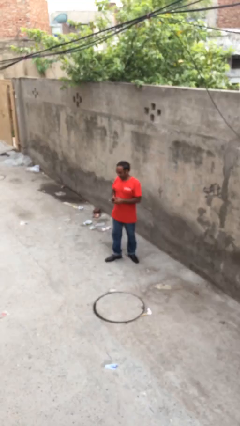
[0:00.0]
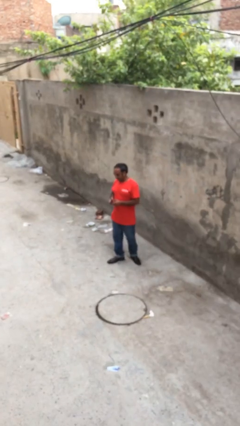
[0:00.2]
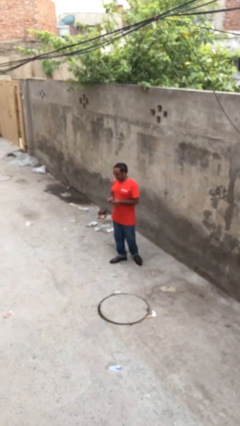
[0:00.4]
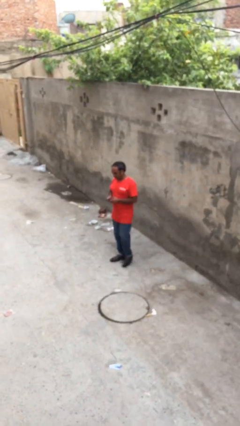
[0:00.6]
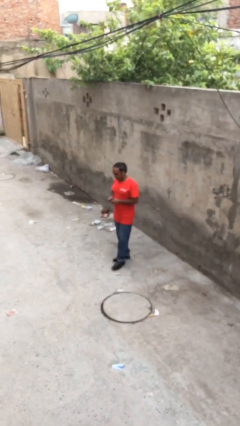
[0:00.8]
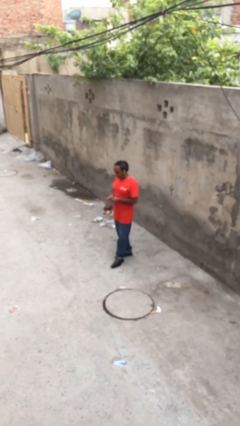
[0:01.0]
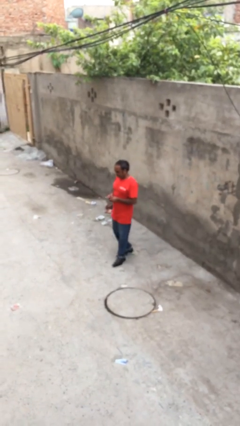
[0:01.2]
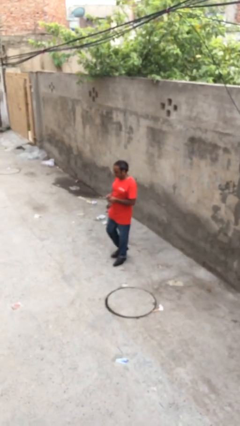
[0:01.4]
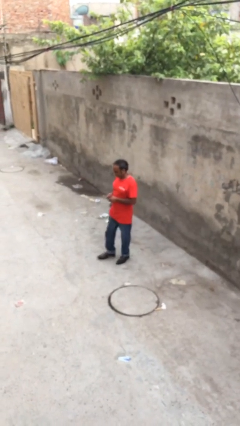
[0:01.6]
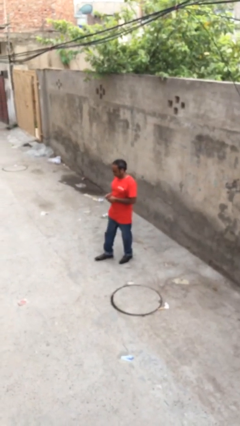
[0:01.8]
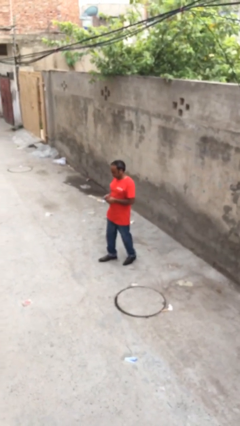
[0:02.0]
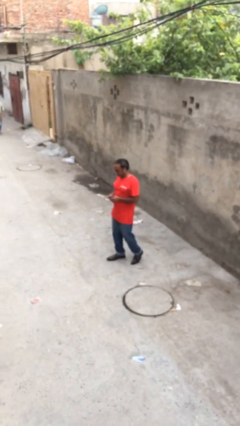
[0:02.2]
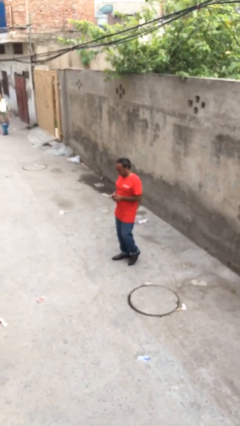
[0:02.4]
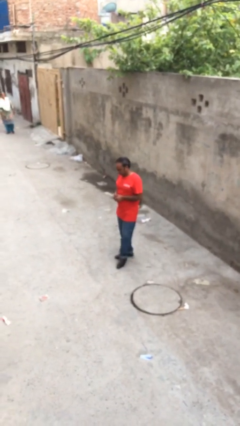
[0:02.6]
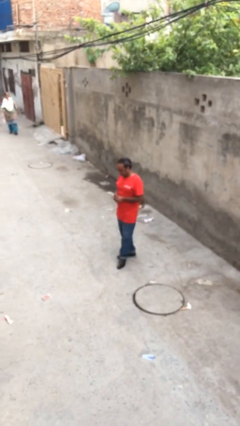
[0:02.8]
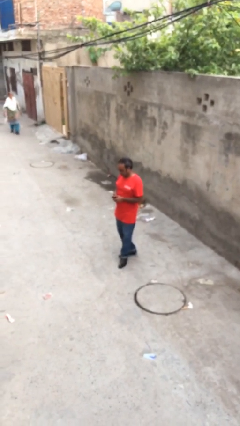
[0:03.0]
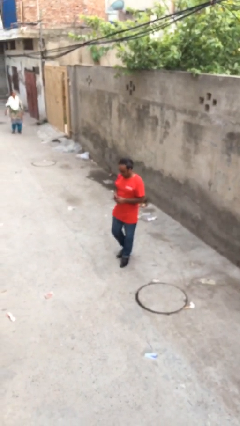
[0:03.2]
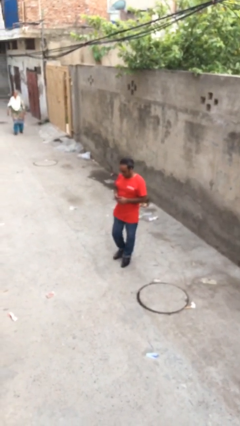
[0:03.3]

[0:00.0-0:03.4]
person texts on phone

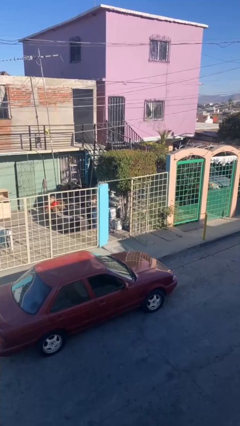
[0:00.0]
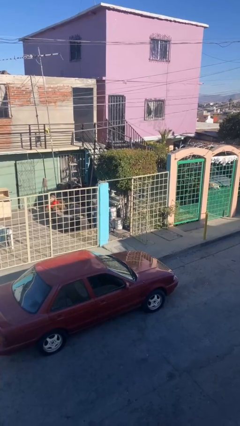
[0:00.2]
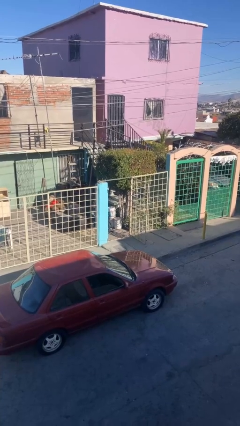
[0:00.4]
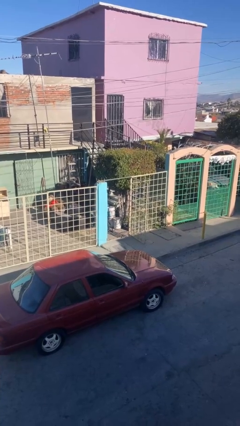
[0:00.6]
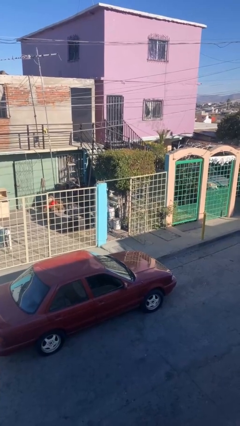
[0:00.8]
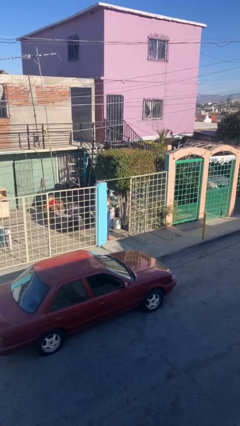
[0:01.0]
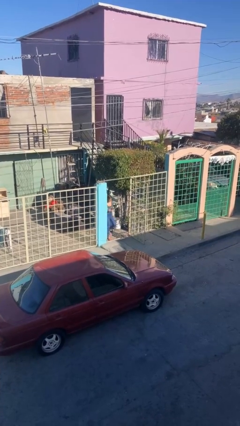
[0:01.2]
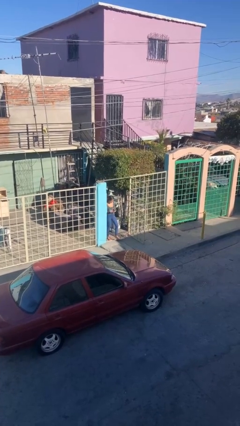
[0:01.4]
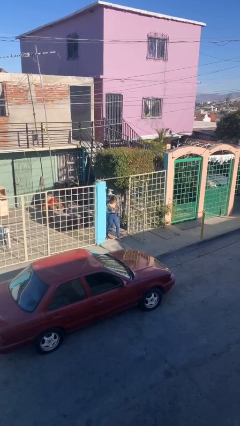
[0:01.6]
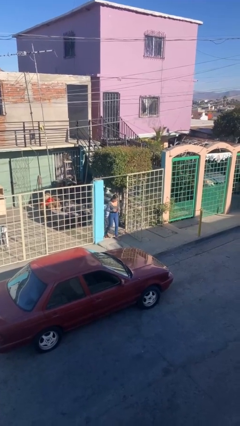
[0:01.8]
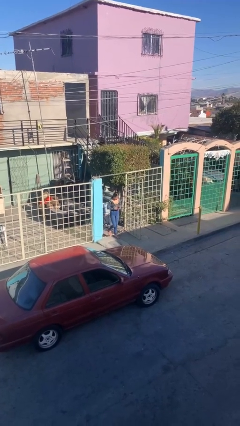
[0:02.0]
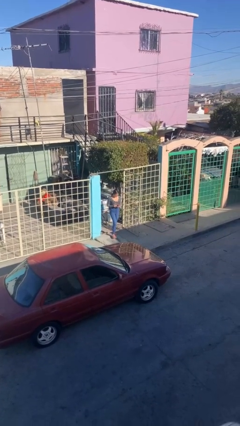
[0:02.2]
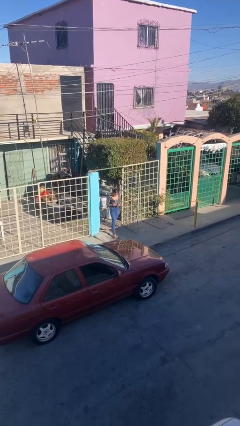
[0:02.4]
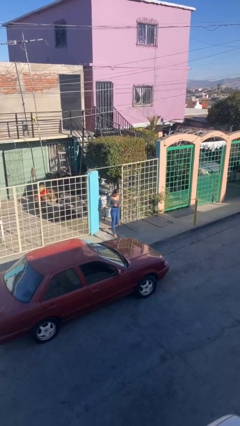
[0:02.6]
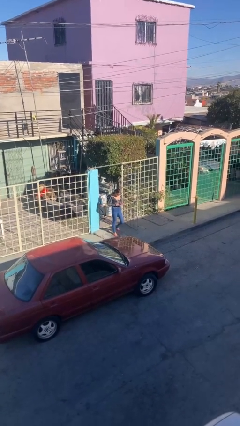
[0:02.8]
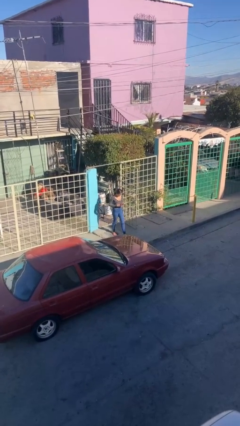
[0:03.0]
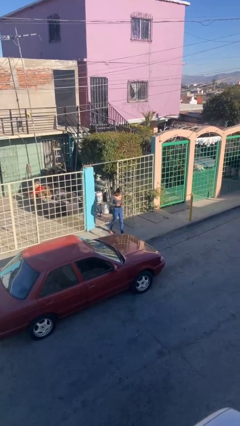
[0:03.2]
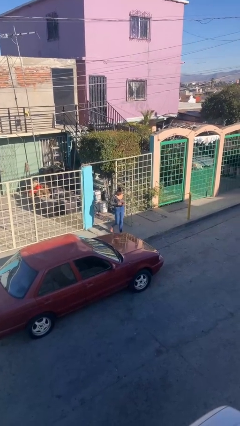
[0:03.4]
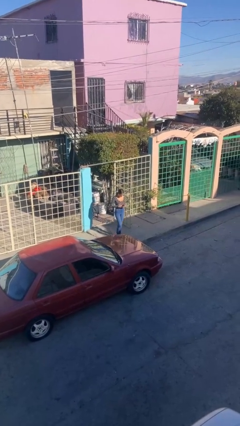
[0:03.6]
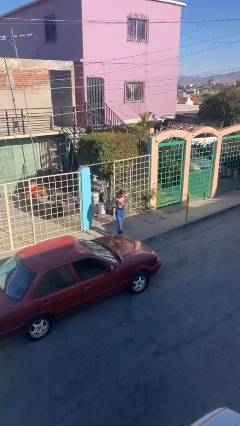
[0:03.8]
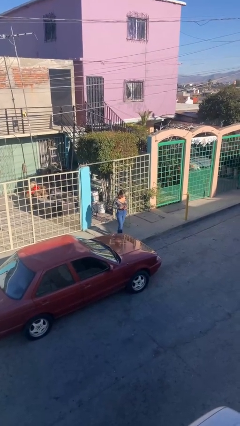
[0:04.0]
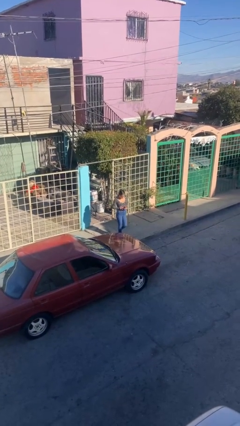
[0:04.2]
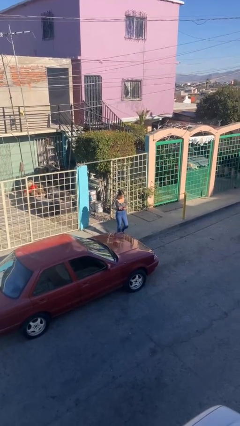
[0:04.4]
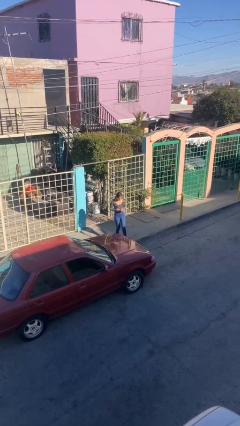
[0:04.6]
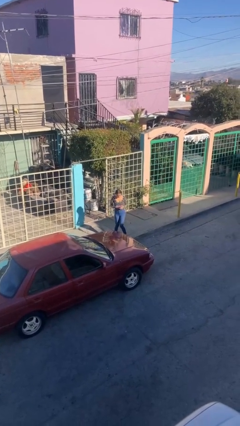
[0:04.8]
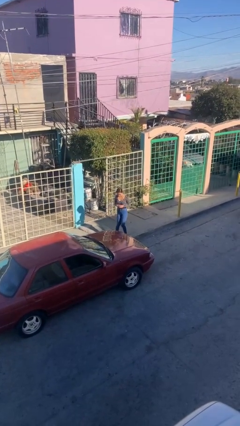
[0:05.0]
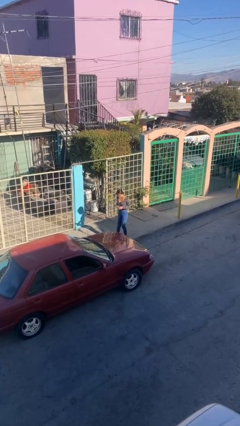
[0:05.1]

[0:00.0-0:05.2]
person exits scene through structure

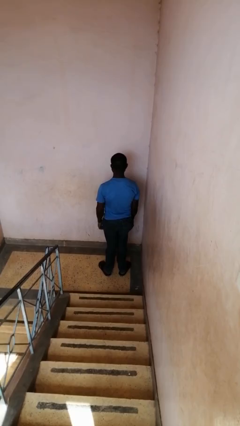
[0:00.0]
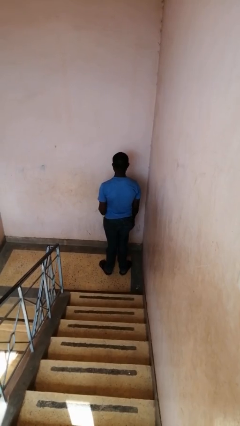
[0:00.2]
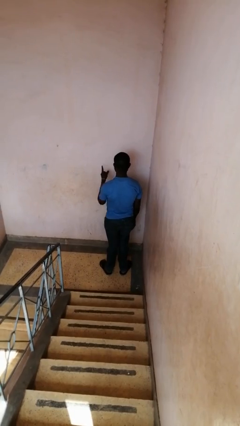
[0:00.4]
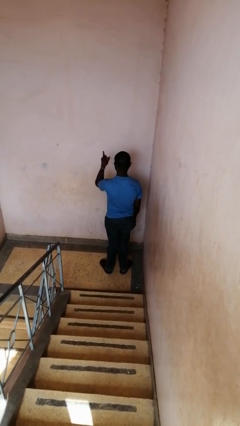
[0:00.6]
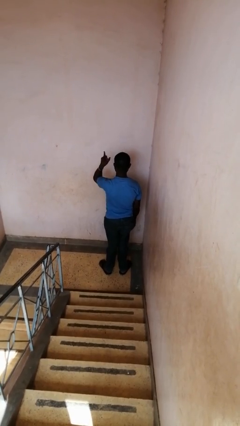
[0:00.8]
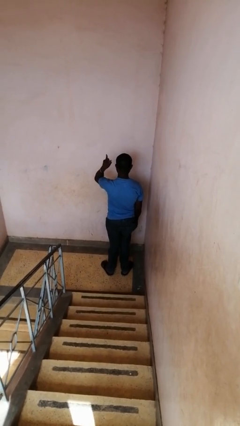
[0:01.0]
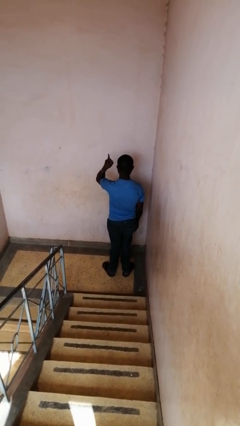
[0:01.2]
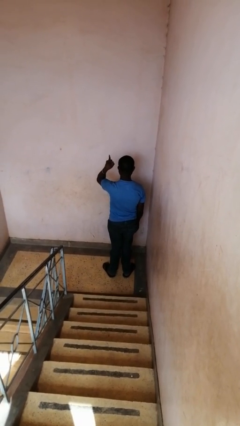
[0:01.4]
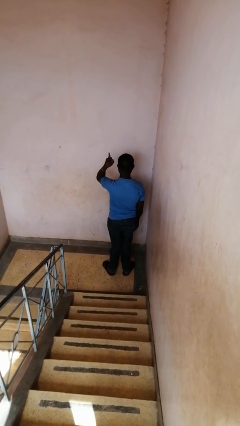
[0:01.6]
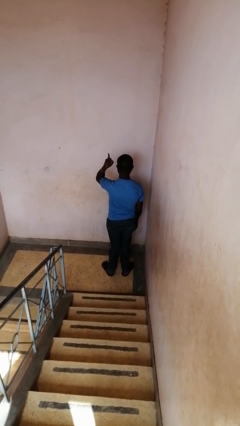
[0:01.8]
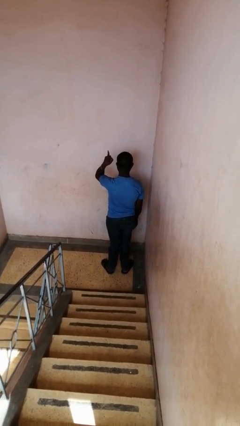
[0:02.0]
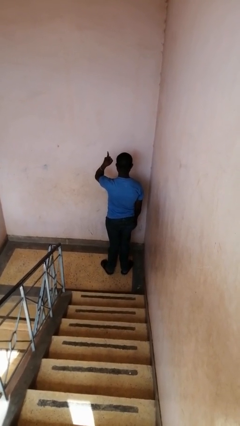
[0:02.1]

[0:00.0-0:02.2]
person gestures number one

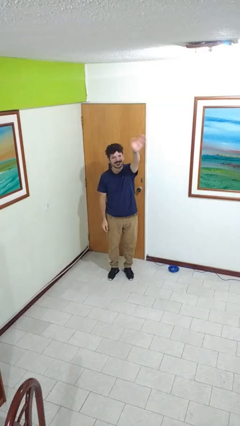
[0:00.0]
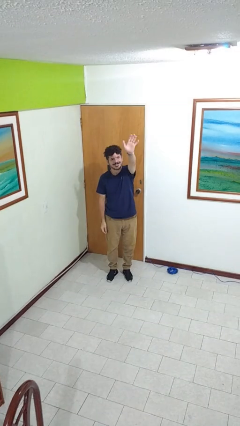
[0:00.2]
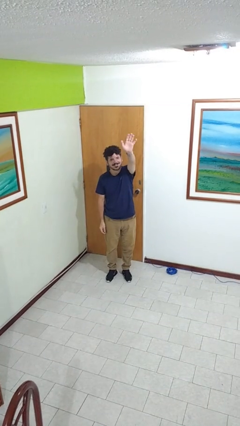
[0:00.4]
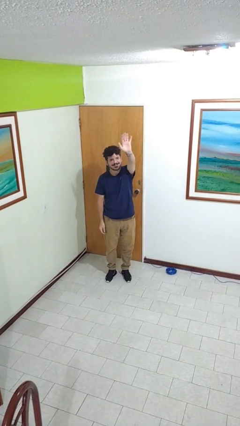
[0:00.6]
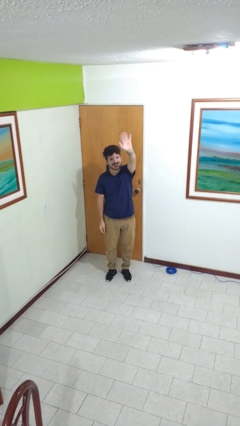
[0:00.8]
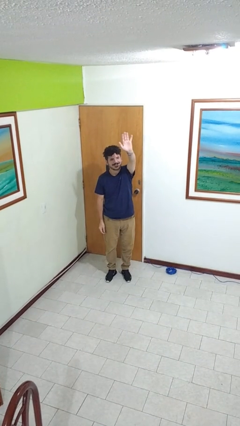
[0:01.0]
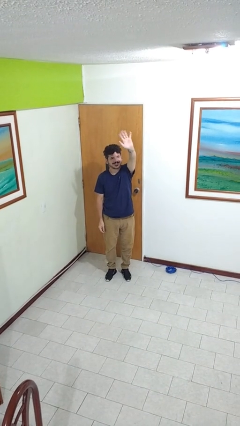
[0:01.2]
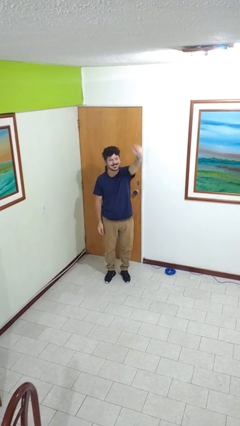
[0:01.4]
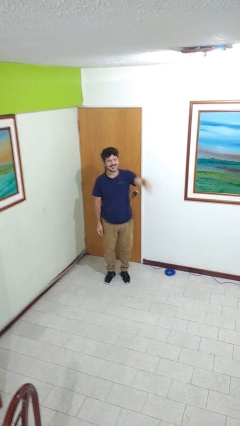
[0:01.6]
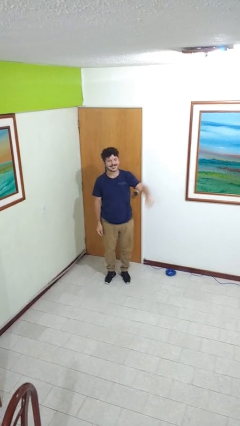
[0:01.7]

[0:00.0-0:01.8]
person waves at person

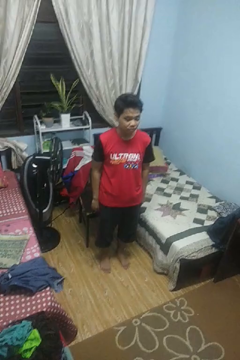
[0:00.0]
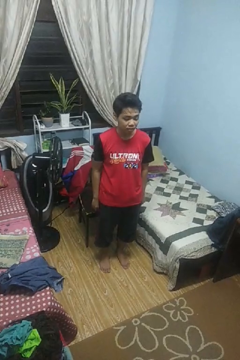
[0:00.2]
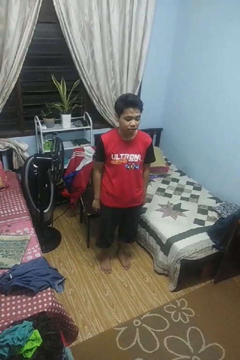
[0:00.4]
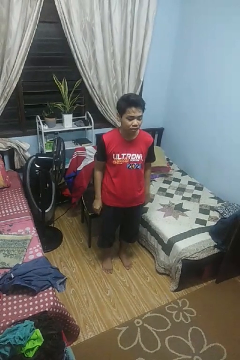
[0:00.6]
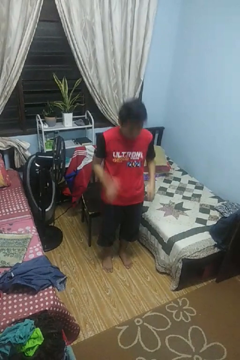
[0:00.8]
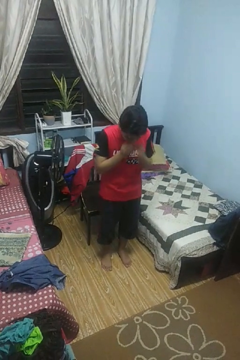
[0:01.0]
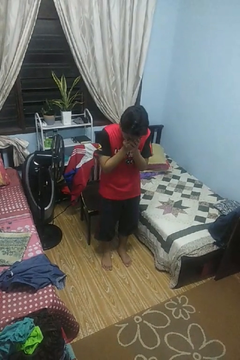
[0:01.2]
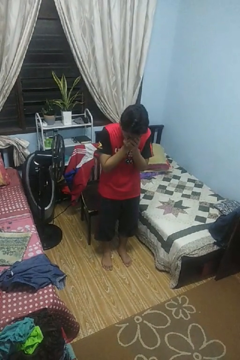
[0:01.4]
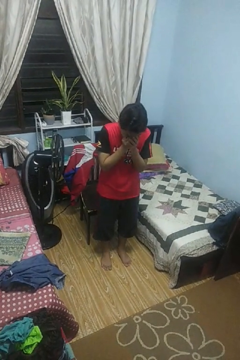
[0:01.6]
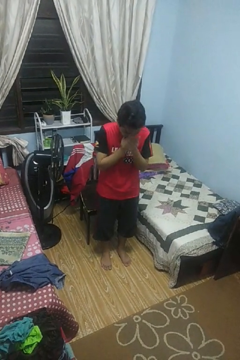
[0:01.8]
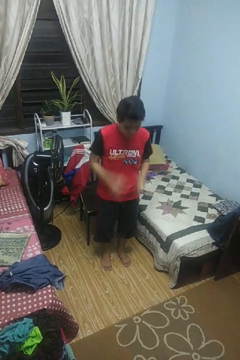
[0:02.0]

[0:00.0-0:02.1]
person sneezes into hand

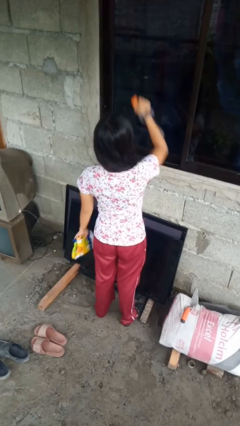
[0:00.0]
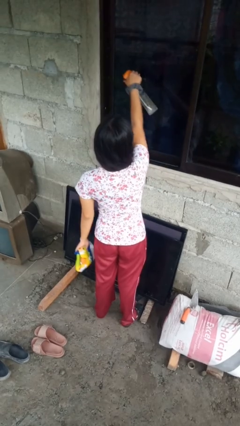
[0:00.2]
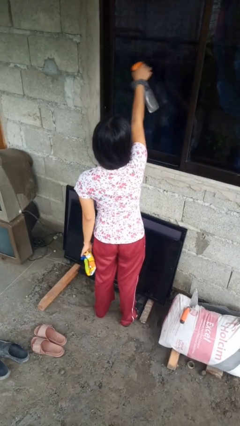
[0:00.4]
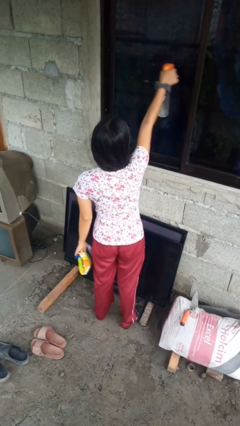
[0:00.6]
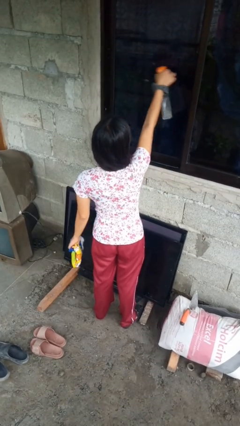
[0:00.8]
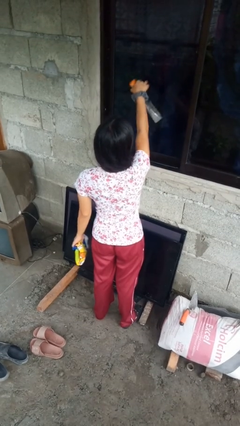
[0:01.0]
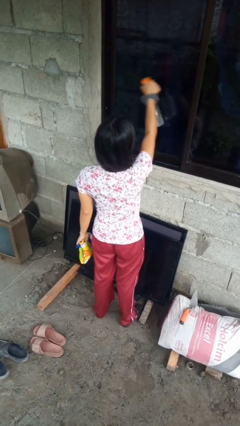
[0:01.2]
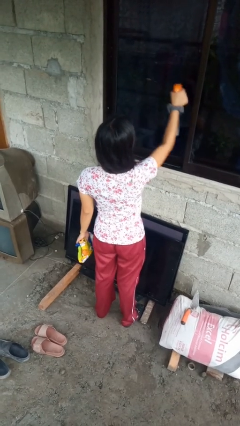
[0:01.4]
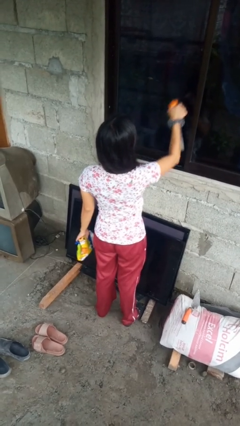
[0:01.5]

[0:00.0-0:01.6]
person sprays from bottle

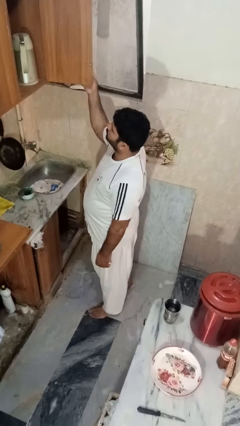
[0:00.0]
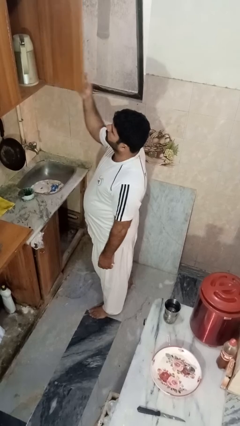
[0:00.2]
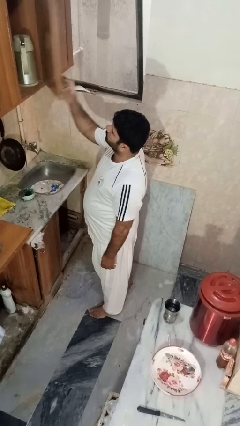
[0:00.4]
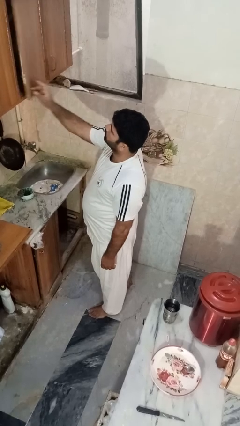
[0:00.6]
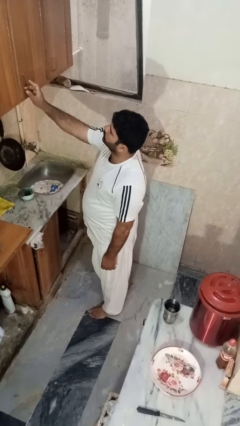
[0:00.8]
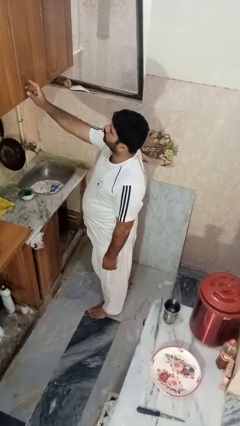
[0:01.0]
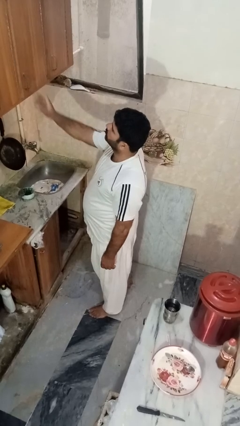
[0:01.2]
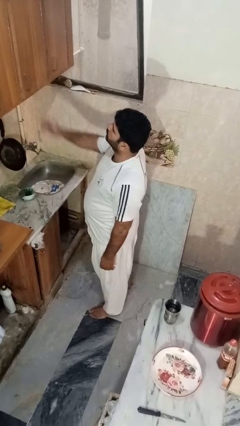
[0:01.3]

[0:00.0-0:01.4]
person closes cabinet
